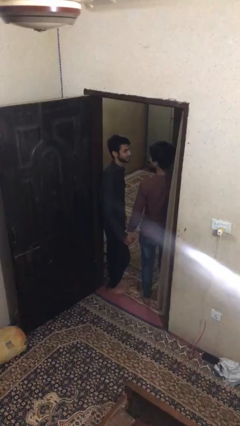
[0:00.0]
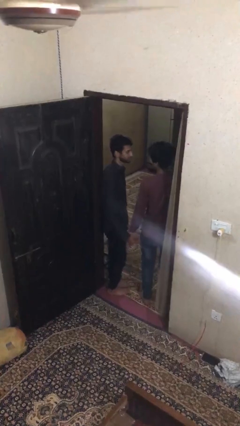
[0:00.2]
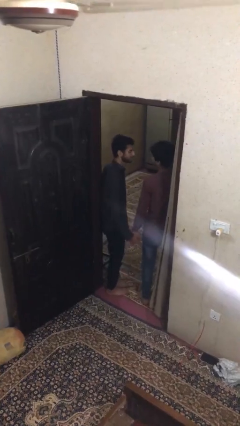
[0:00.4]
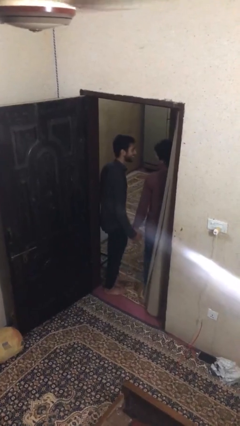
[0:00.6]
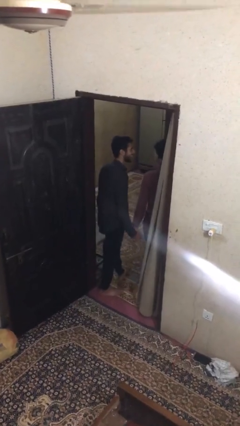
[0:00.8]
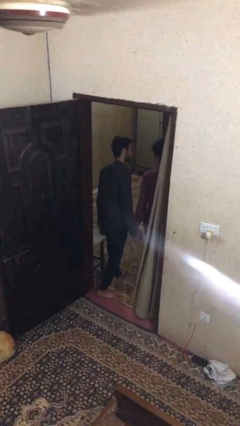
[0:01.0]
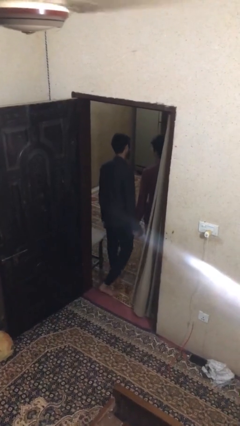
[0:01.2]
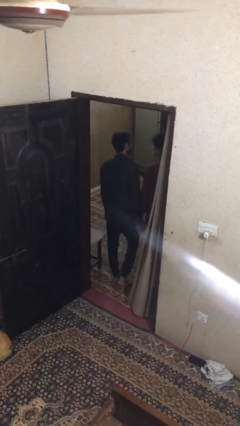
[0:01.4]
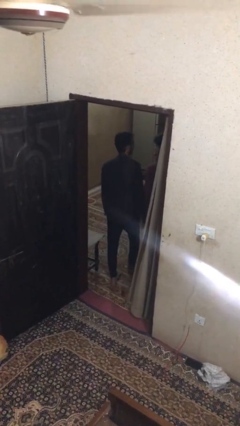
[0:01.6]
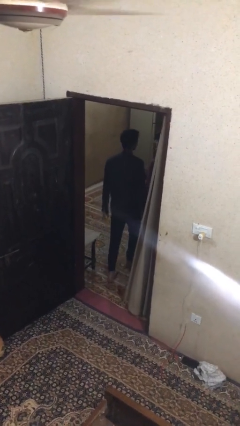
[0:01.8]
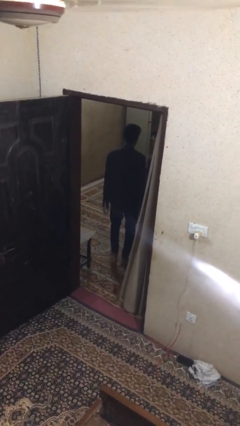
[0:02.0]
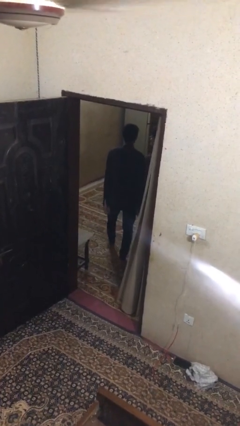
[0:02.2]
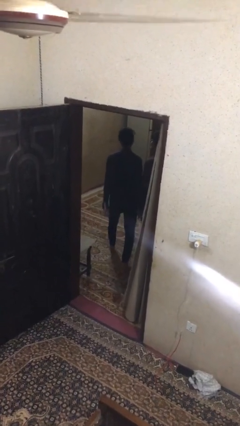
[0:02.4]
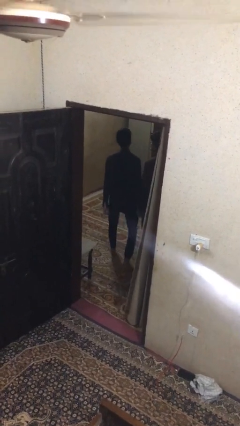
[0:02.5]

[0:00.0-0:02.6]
person holds hand

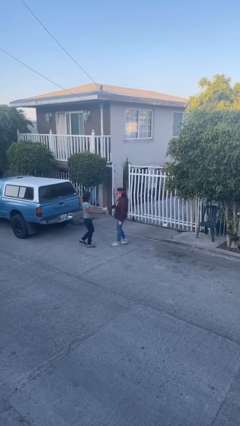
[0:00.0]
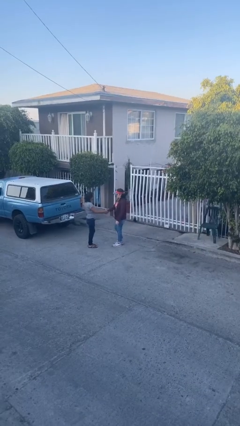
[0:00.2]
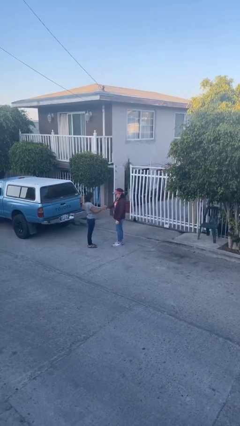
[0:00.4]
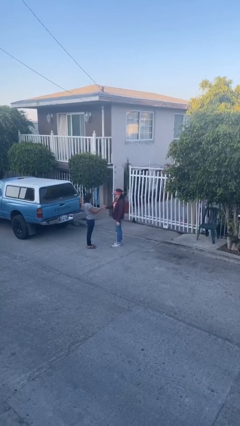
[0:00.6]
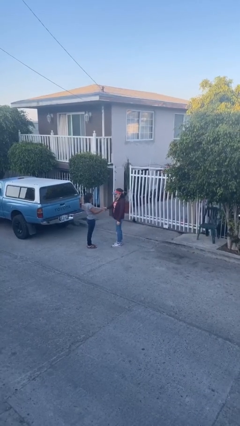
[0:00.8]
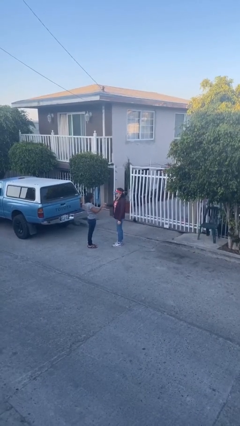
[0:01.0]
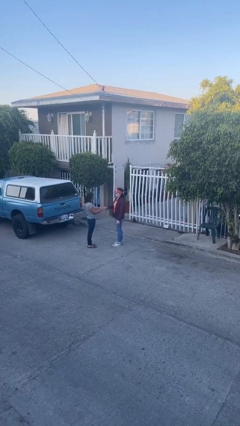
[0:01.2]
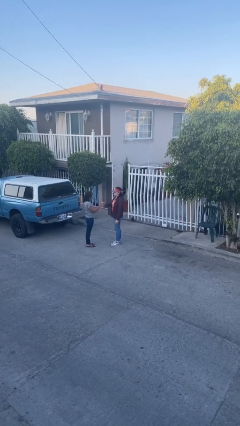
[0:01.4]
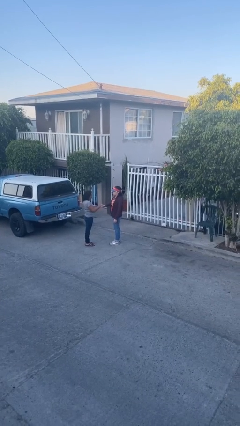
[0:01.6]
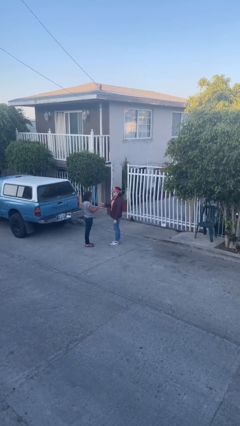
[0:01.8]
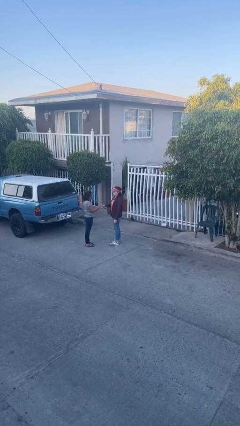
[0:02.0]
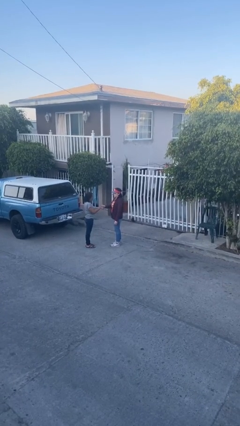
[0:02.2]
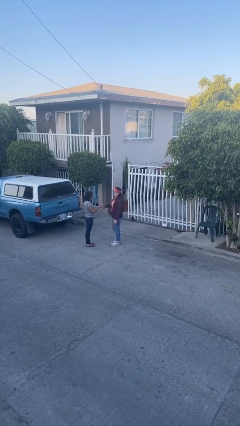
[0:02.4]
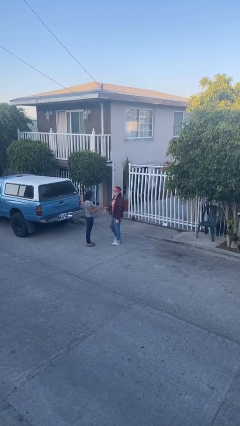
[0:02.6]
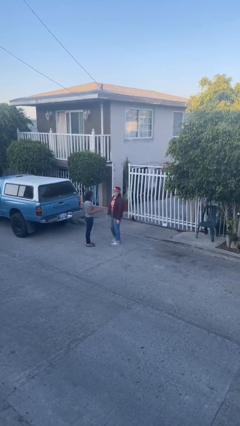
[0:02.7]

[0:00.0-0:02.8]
person shakes hand

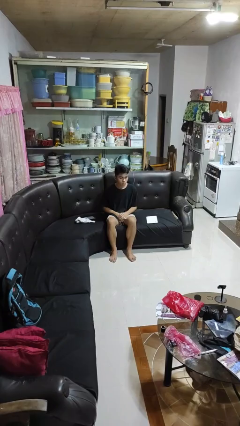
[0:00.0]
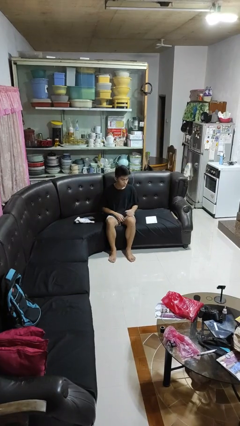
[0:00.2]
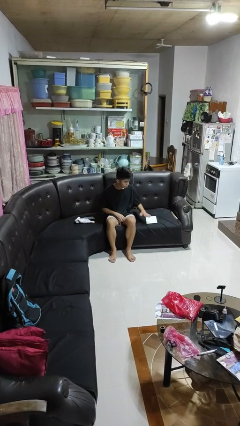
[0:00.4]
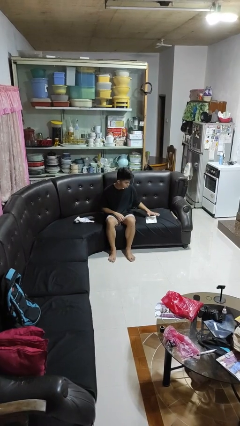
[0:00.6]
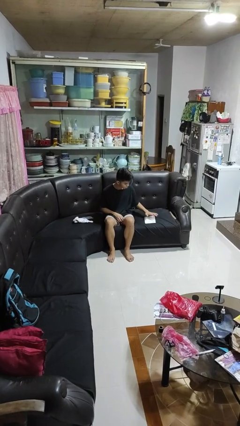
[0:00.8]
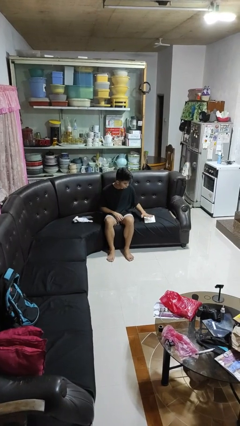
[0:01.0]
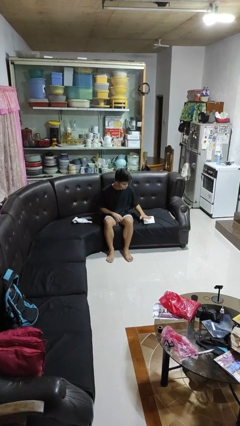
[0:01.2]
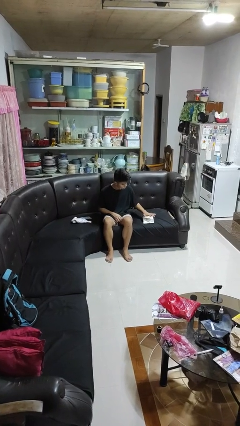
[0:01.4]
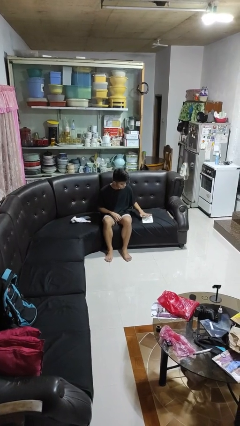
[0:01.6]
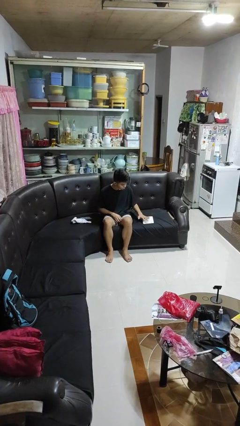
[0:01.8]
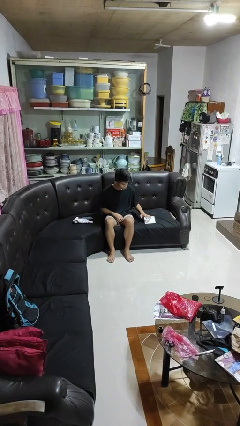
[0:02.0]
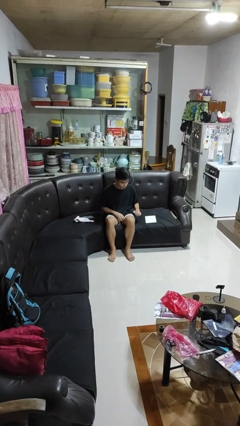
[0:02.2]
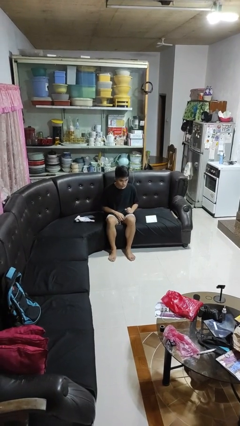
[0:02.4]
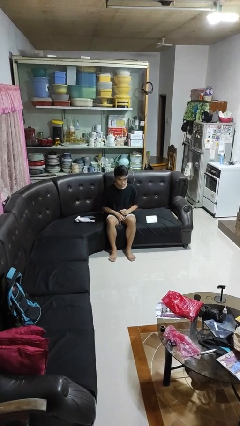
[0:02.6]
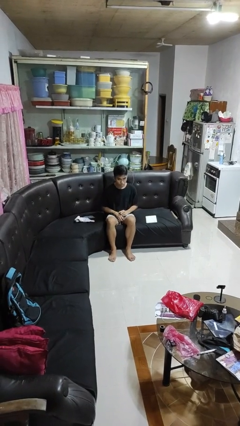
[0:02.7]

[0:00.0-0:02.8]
person waves hand over object

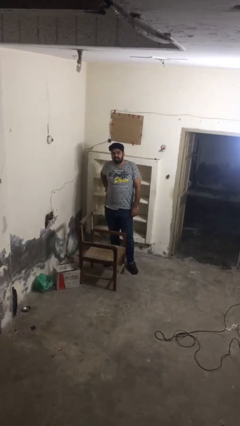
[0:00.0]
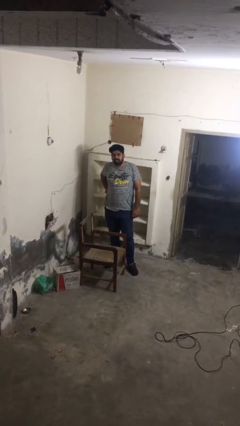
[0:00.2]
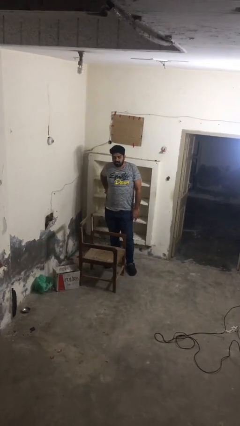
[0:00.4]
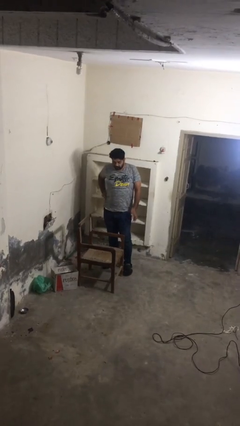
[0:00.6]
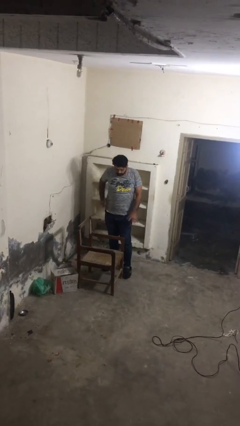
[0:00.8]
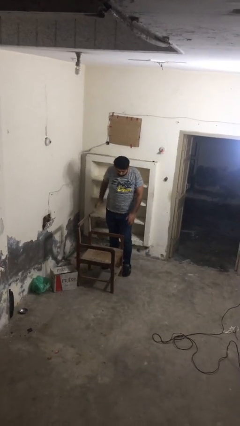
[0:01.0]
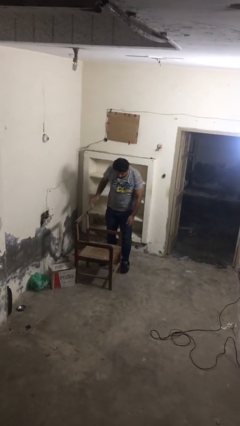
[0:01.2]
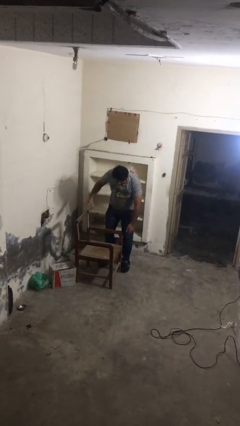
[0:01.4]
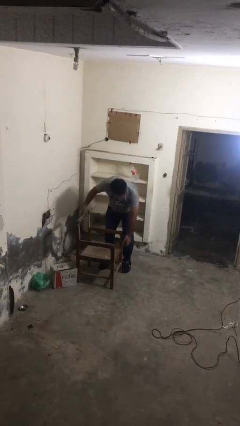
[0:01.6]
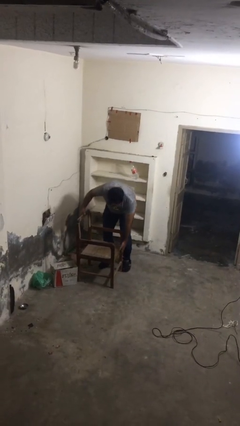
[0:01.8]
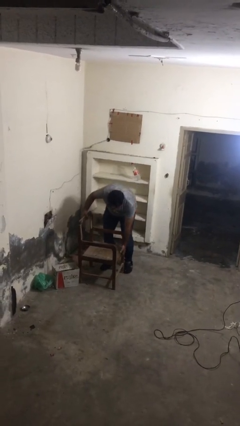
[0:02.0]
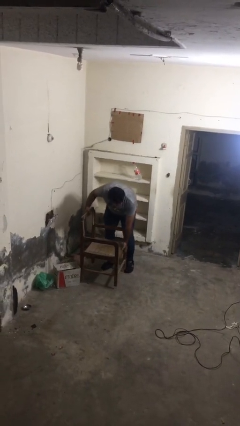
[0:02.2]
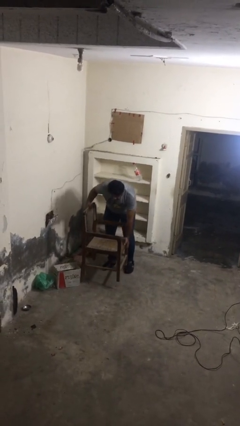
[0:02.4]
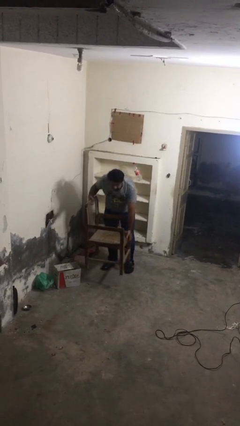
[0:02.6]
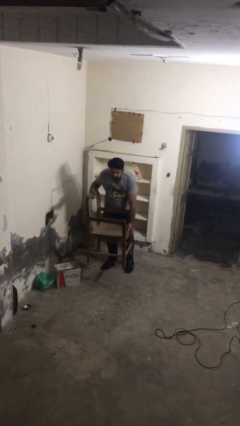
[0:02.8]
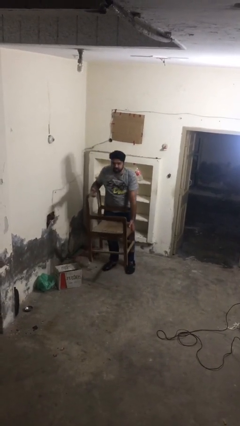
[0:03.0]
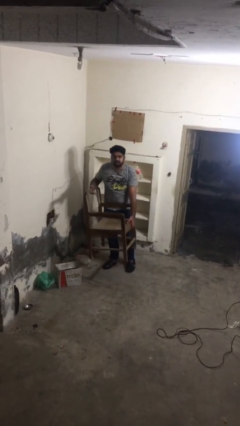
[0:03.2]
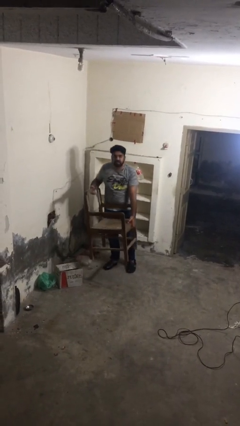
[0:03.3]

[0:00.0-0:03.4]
person picks up object from floor

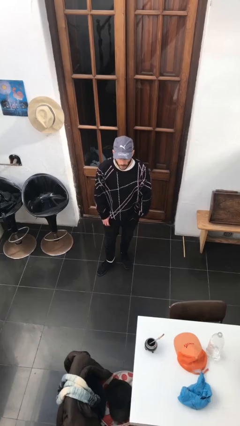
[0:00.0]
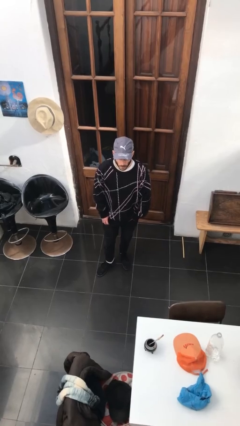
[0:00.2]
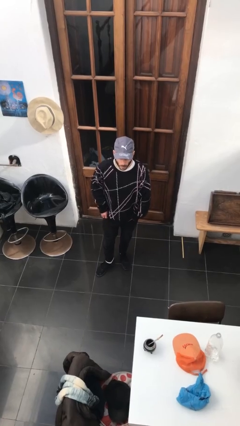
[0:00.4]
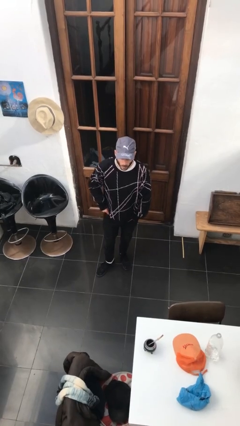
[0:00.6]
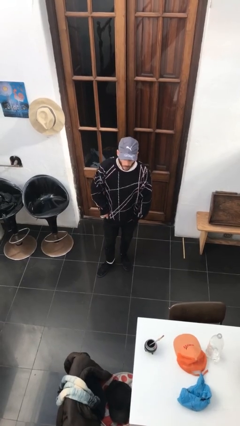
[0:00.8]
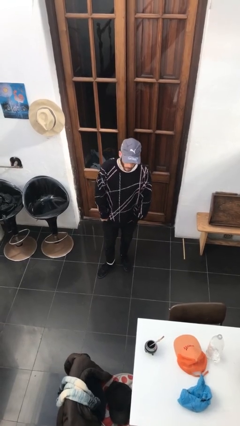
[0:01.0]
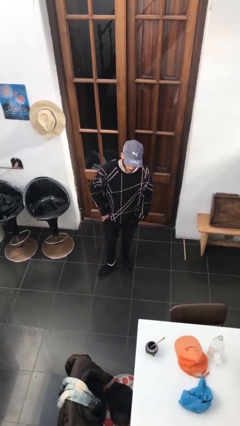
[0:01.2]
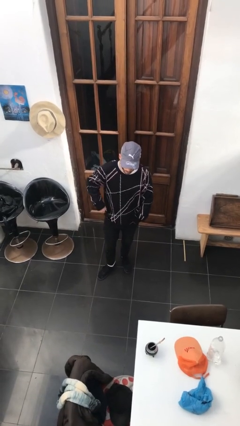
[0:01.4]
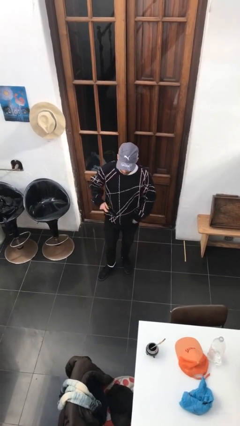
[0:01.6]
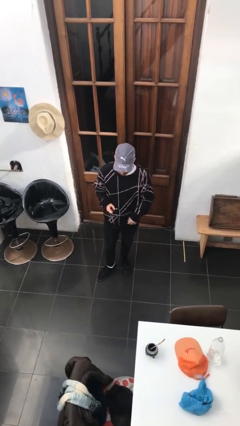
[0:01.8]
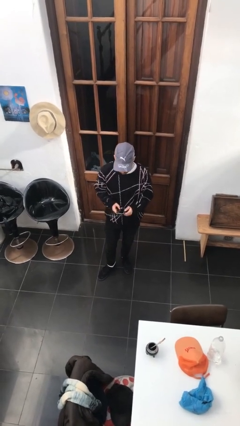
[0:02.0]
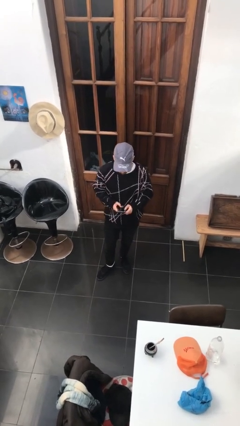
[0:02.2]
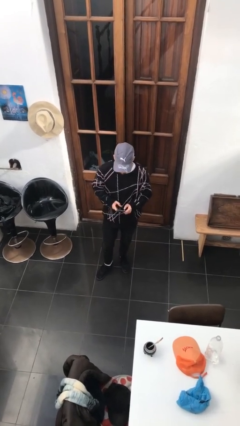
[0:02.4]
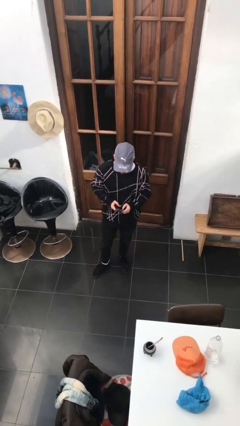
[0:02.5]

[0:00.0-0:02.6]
person takes phone from pocket

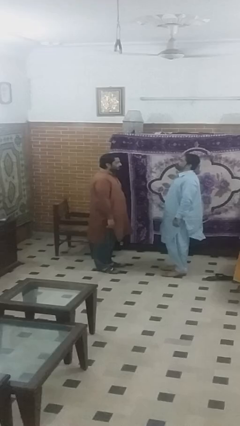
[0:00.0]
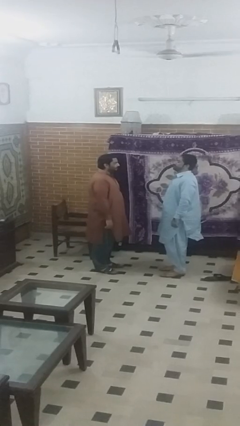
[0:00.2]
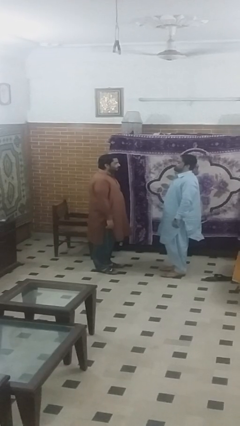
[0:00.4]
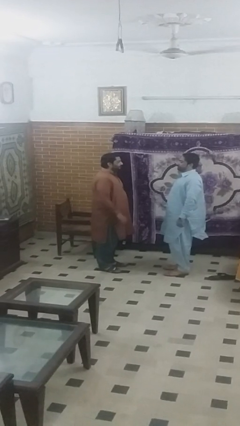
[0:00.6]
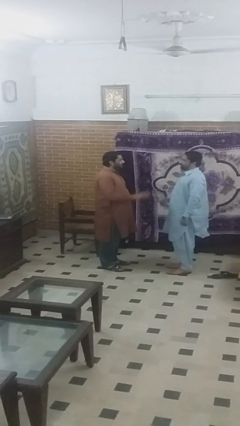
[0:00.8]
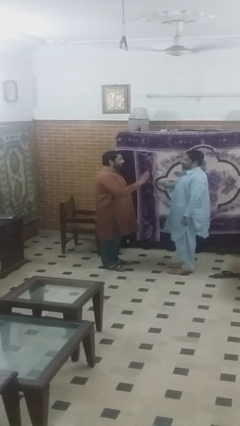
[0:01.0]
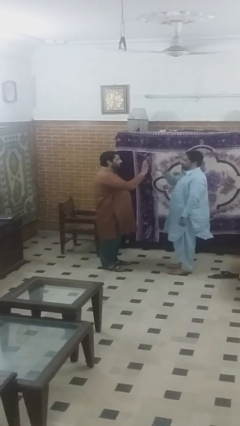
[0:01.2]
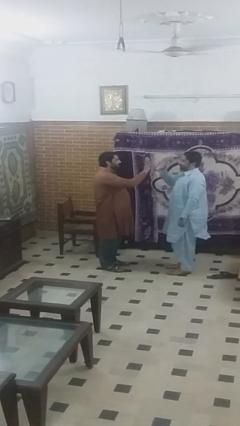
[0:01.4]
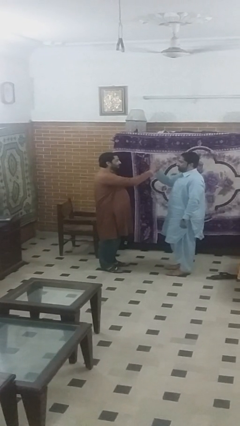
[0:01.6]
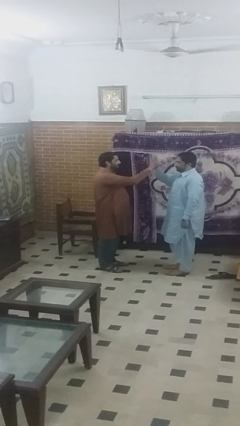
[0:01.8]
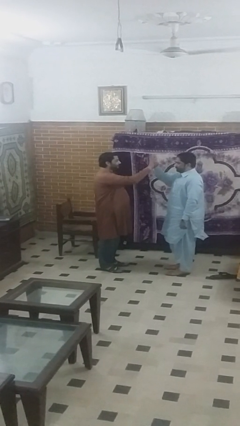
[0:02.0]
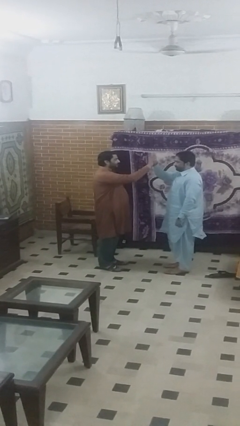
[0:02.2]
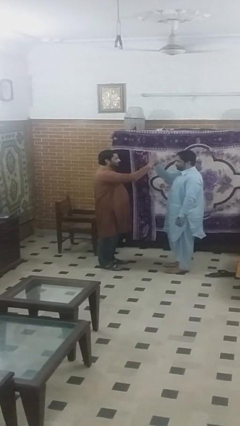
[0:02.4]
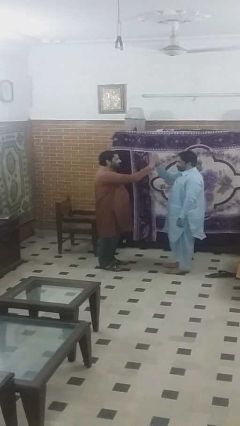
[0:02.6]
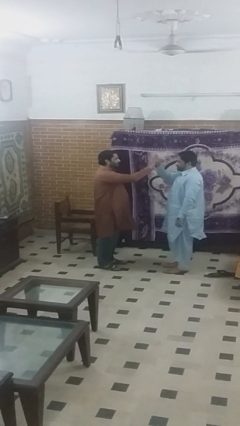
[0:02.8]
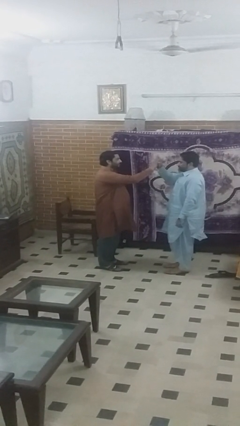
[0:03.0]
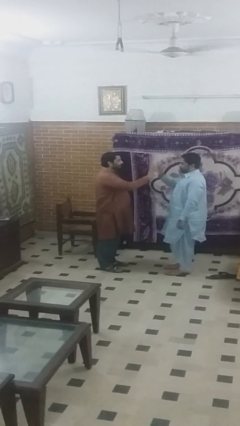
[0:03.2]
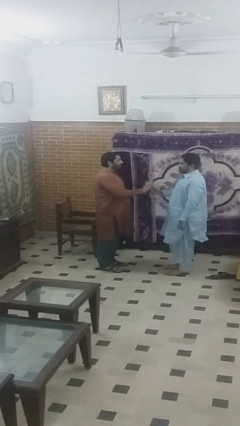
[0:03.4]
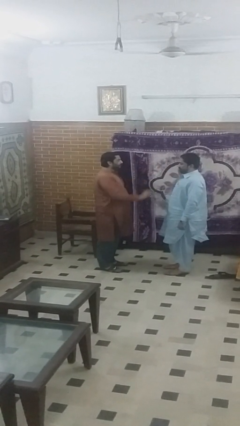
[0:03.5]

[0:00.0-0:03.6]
person highfives hand
